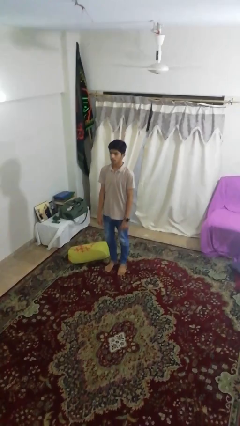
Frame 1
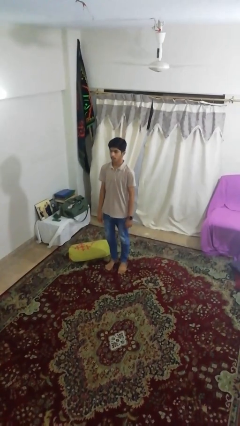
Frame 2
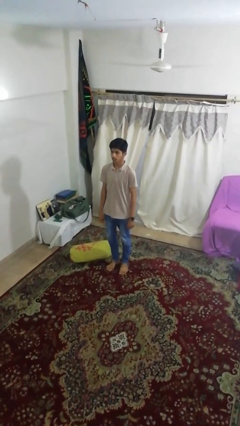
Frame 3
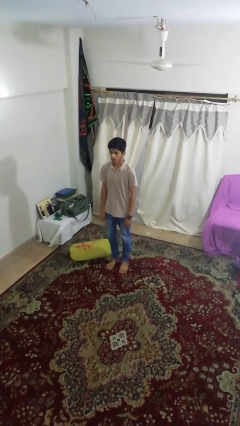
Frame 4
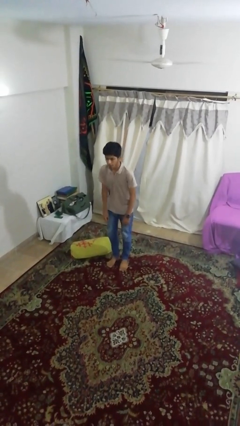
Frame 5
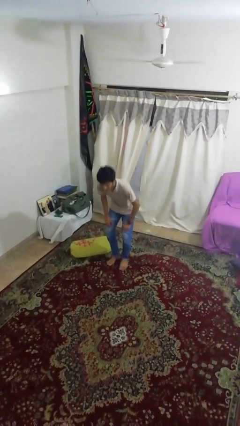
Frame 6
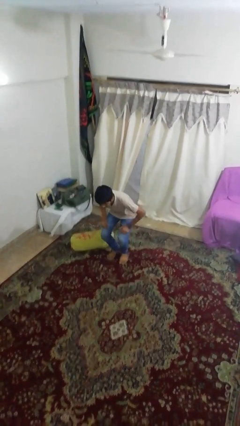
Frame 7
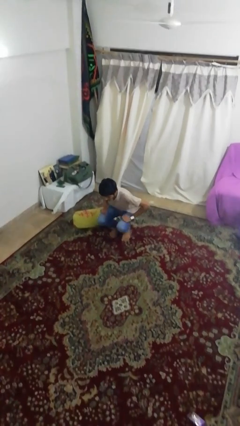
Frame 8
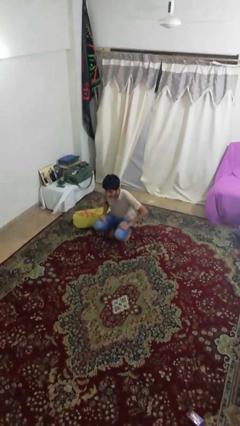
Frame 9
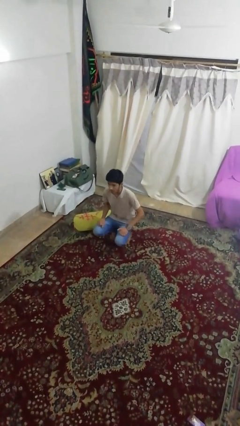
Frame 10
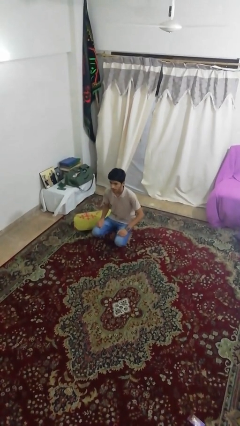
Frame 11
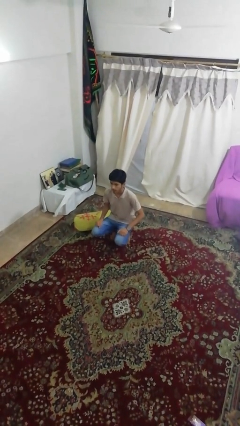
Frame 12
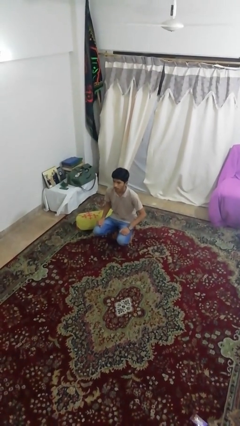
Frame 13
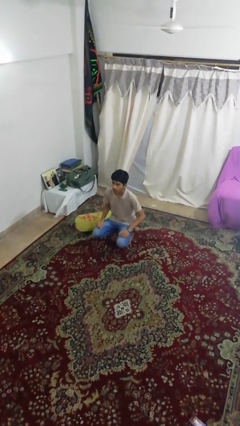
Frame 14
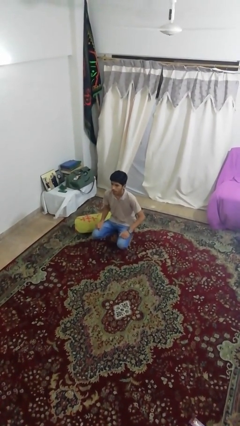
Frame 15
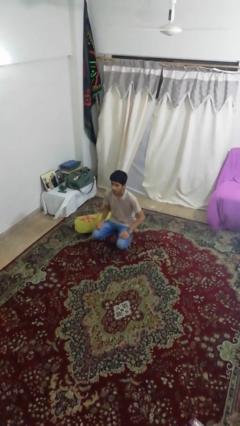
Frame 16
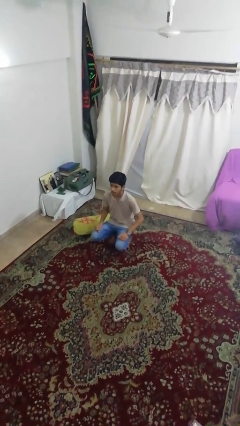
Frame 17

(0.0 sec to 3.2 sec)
person squats

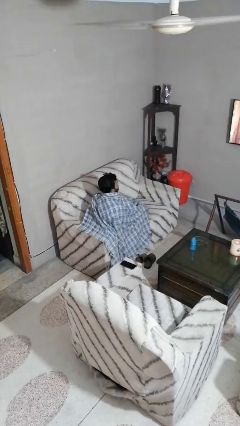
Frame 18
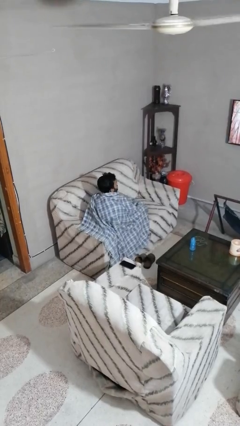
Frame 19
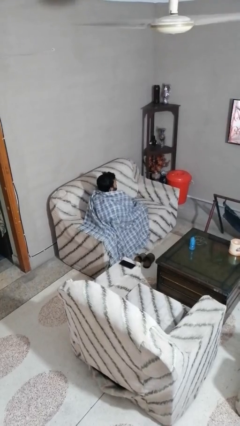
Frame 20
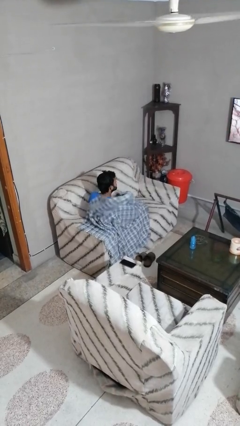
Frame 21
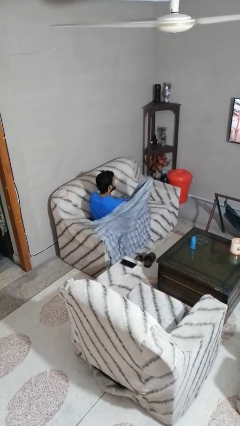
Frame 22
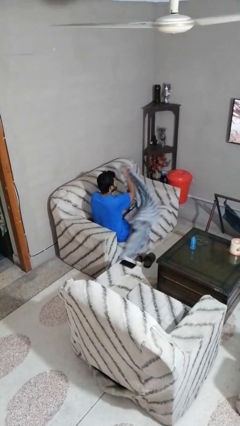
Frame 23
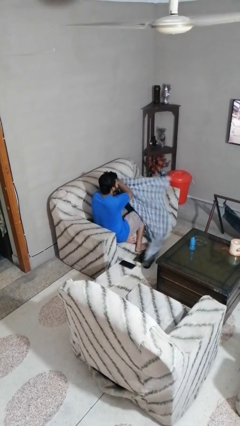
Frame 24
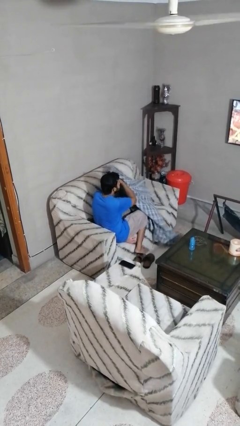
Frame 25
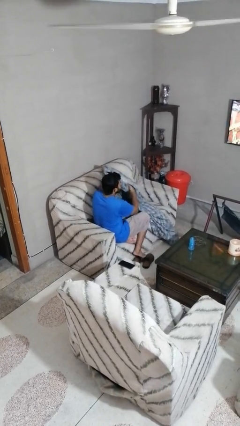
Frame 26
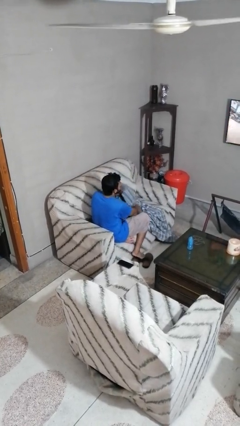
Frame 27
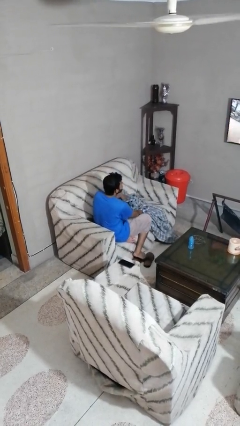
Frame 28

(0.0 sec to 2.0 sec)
person uncovers with blanket

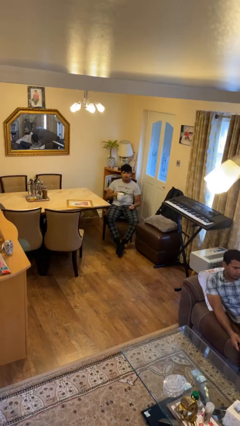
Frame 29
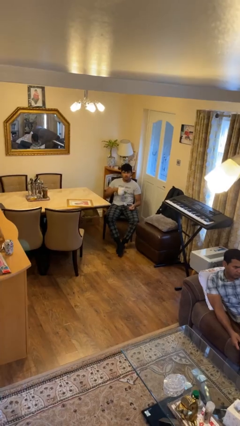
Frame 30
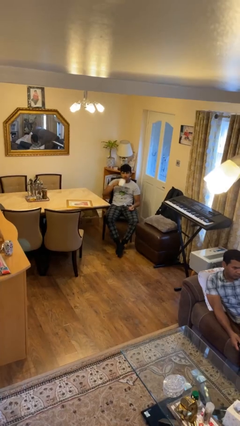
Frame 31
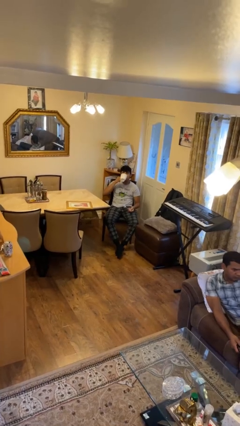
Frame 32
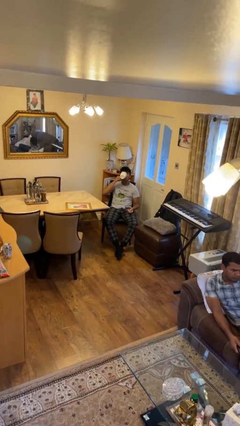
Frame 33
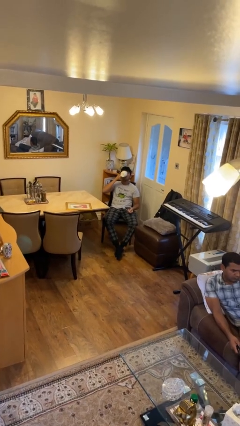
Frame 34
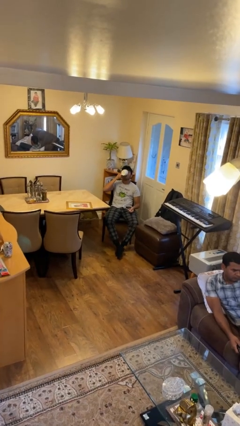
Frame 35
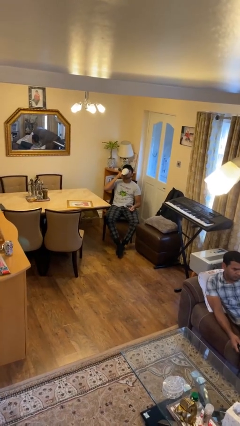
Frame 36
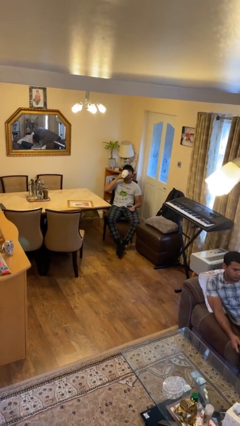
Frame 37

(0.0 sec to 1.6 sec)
person drinks from mug

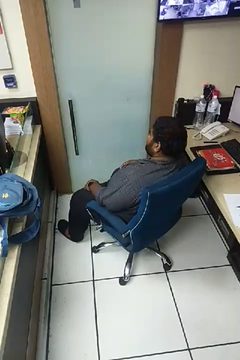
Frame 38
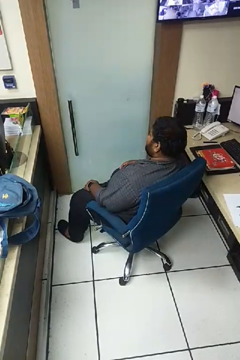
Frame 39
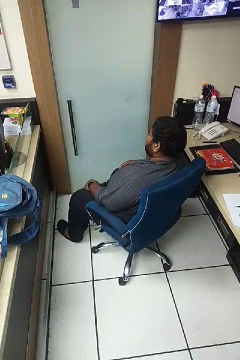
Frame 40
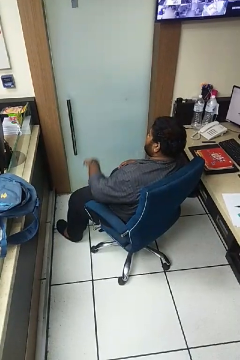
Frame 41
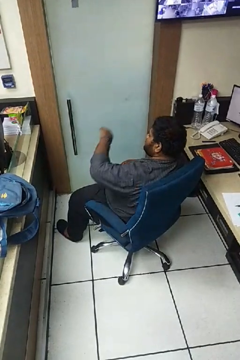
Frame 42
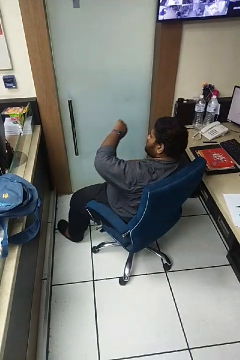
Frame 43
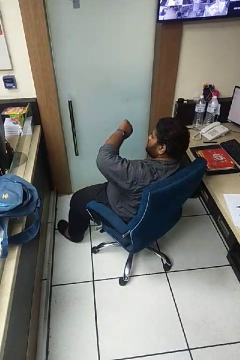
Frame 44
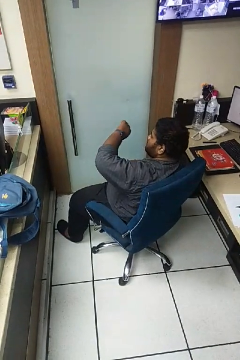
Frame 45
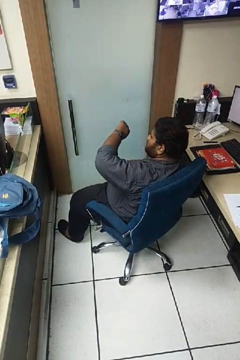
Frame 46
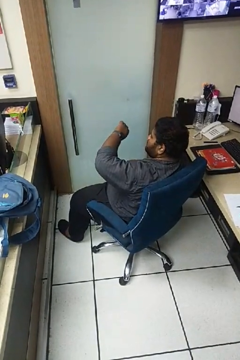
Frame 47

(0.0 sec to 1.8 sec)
person looks at wristwatch

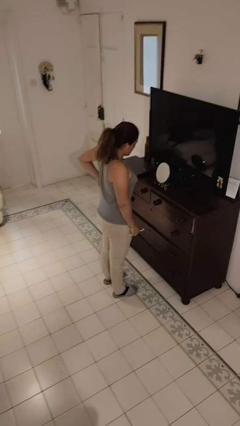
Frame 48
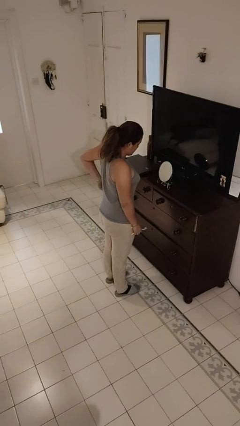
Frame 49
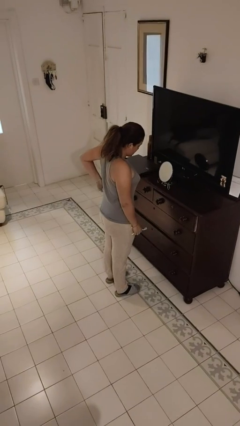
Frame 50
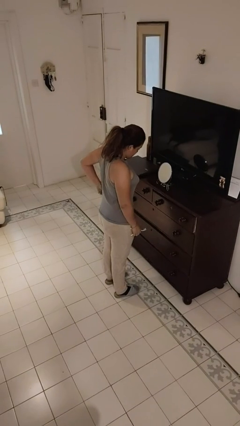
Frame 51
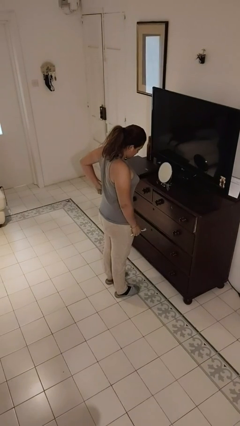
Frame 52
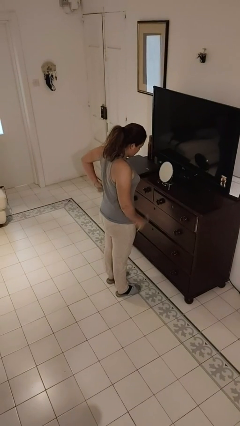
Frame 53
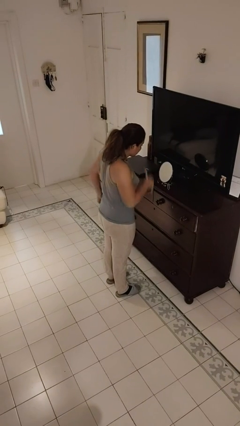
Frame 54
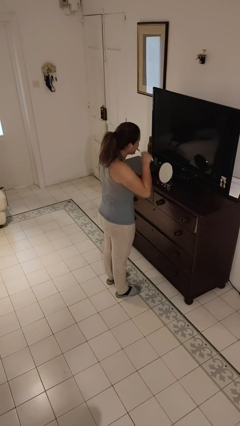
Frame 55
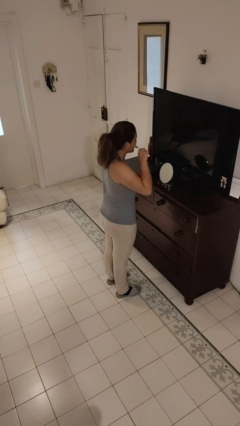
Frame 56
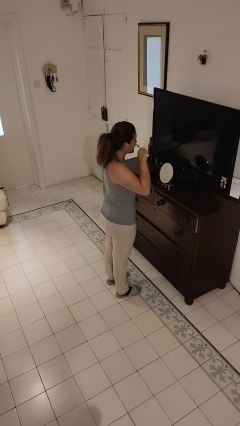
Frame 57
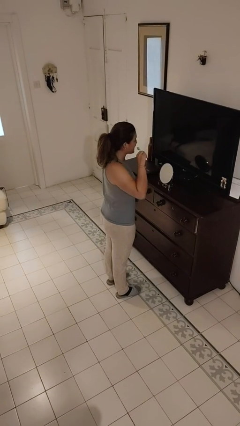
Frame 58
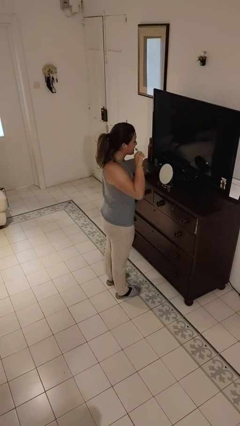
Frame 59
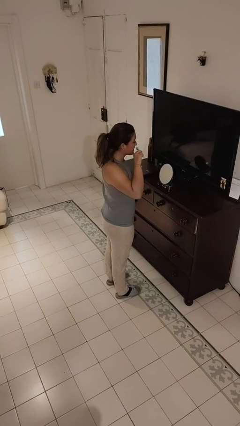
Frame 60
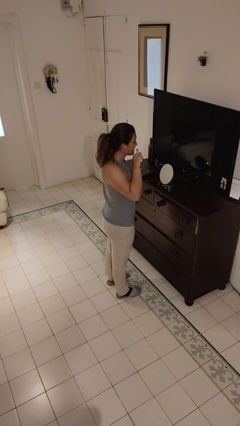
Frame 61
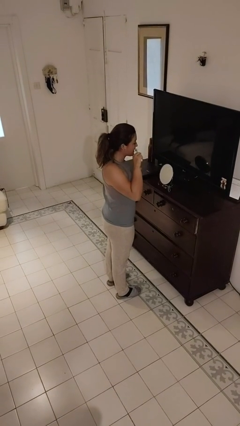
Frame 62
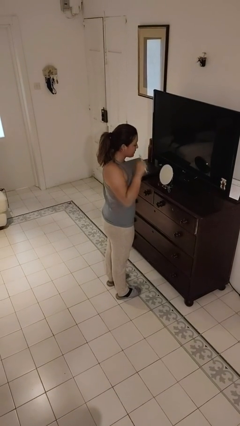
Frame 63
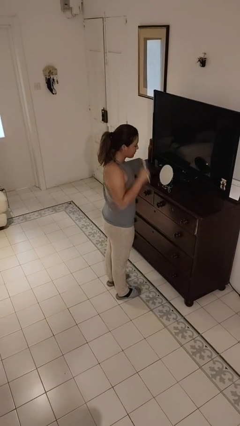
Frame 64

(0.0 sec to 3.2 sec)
person brushes teeth

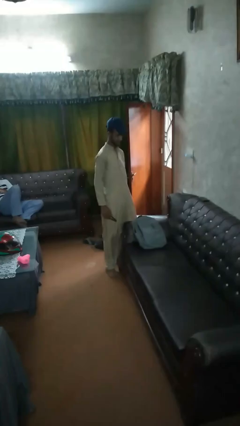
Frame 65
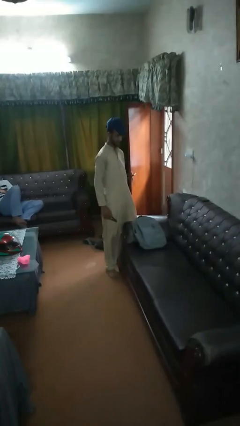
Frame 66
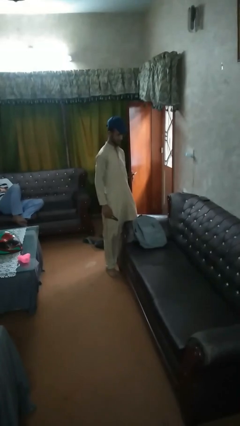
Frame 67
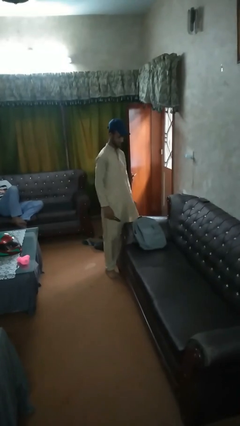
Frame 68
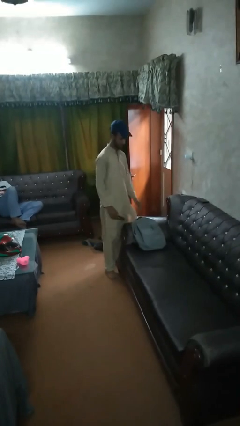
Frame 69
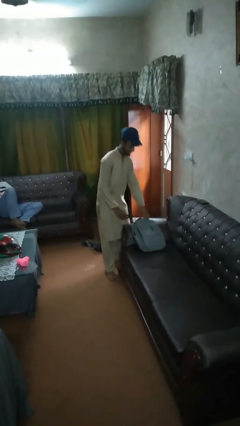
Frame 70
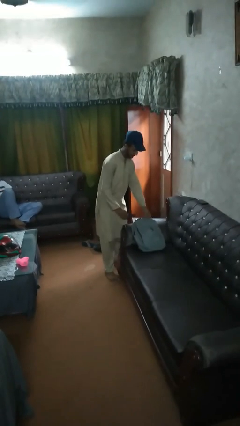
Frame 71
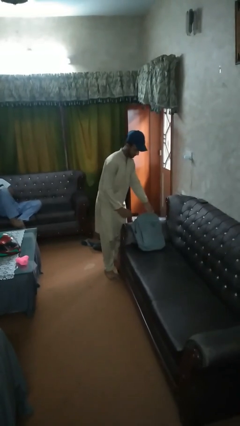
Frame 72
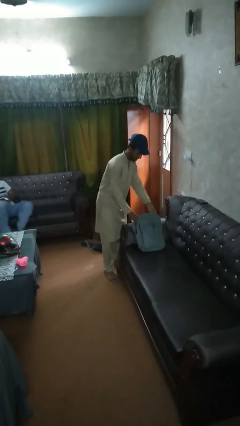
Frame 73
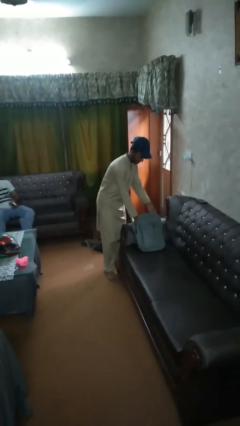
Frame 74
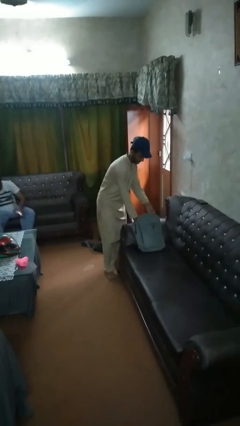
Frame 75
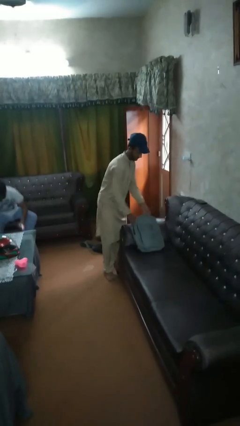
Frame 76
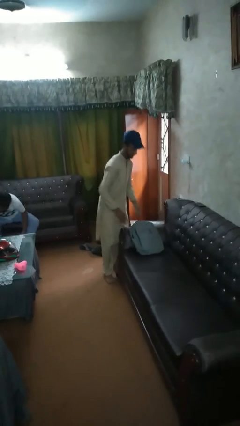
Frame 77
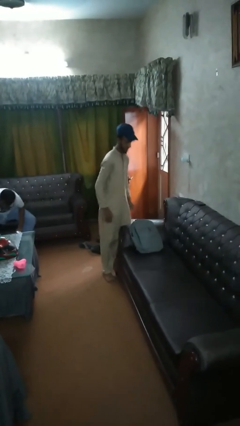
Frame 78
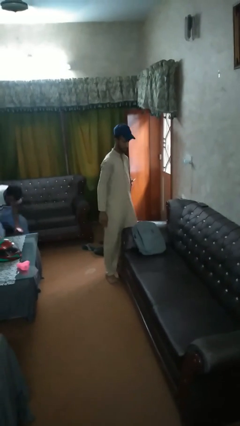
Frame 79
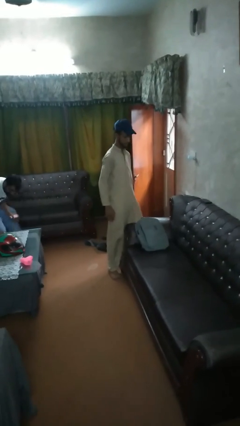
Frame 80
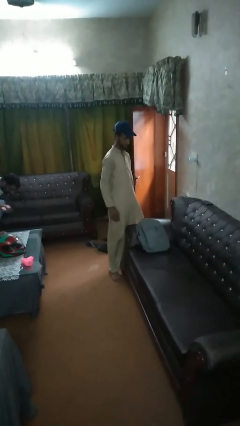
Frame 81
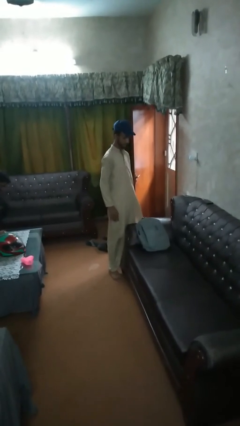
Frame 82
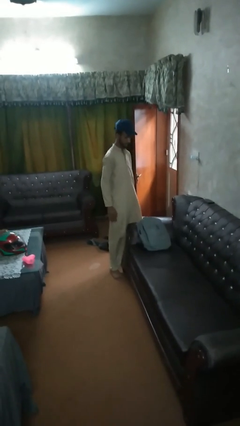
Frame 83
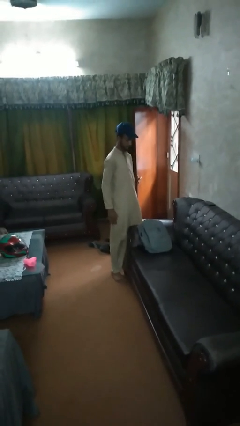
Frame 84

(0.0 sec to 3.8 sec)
person puts object into bag

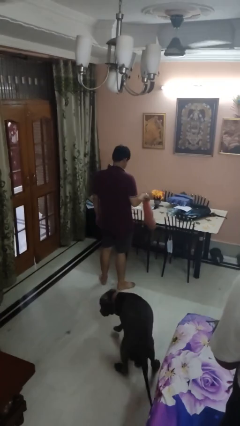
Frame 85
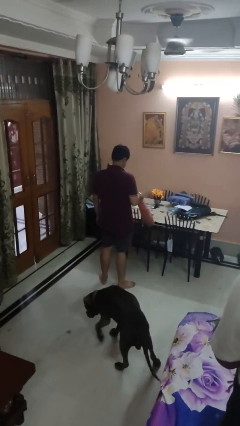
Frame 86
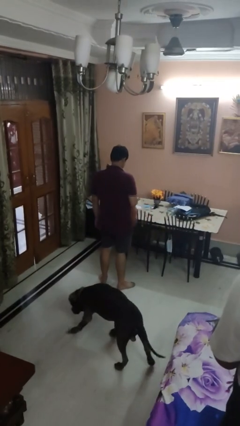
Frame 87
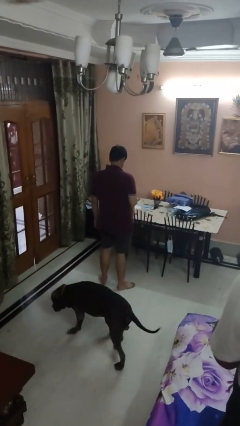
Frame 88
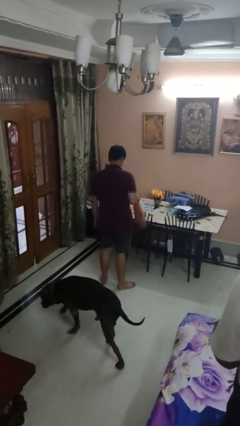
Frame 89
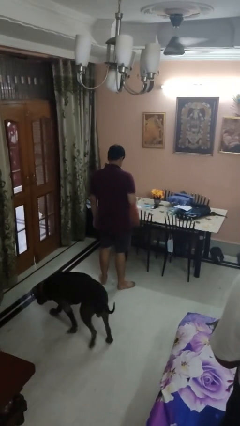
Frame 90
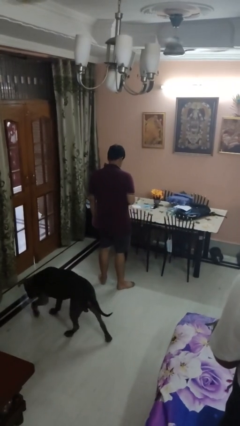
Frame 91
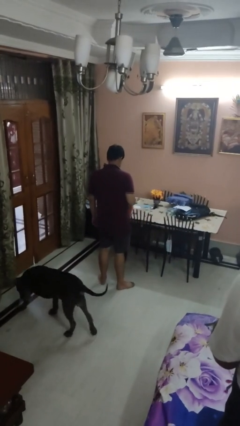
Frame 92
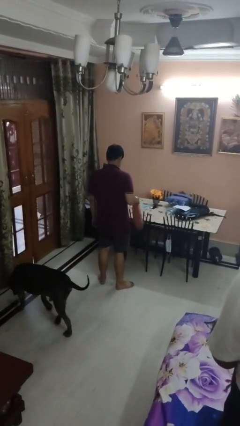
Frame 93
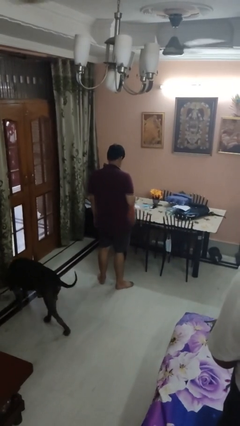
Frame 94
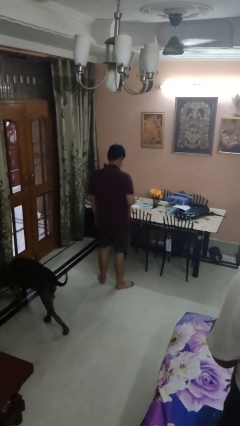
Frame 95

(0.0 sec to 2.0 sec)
person dusts furniture

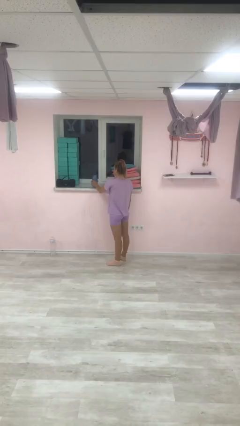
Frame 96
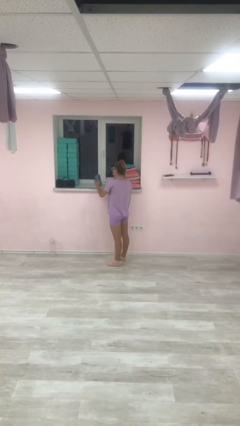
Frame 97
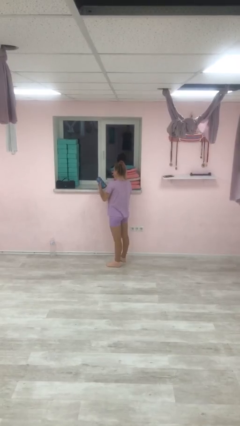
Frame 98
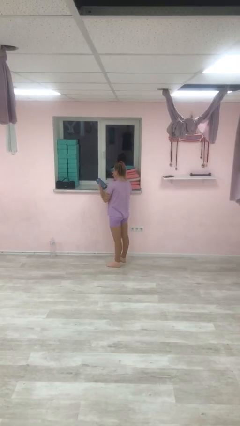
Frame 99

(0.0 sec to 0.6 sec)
person picks up object from countertop
